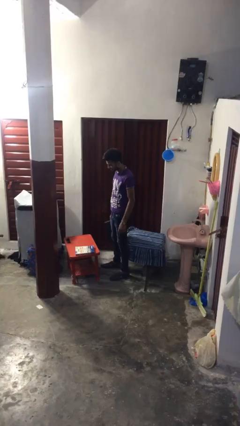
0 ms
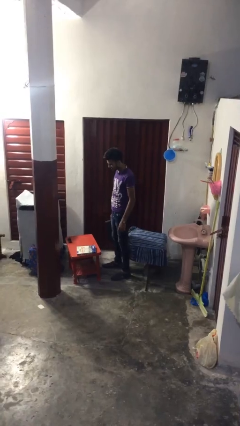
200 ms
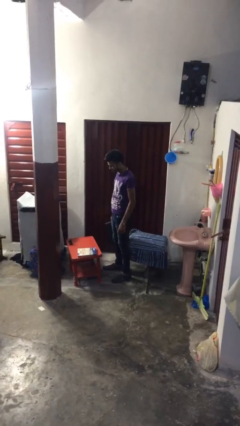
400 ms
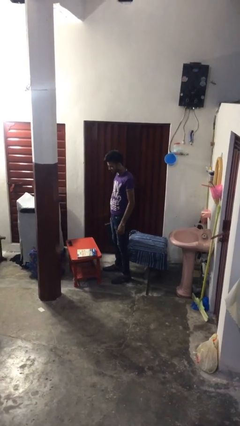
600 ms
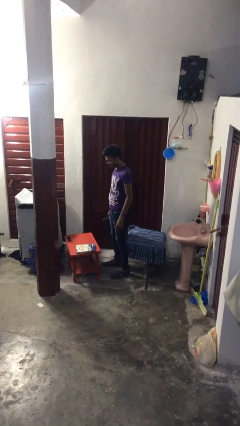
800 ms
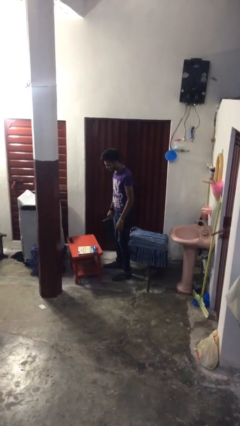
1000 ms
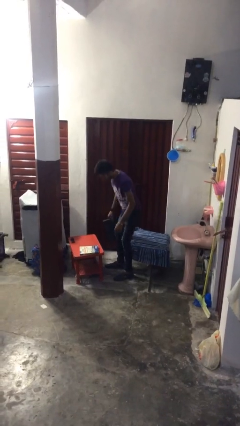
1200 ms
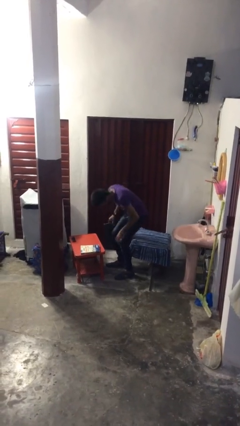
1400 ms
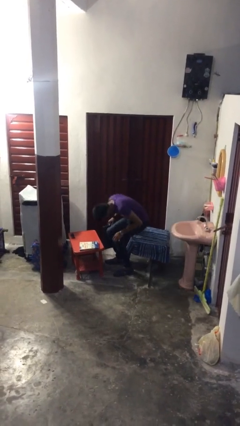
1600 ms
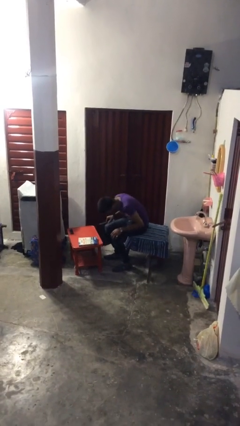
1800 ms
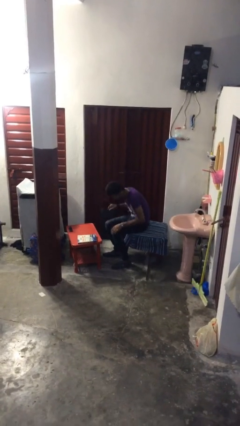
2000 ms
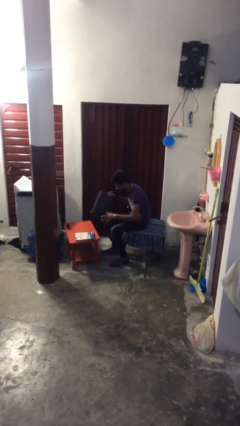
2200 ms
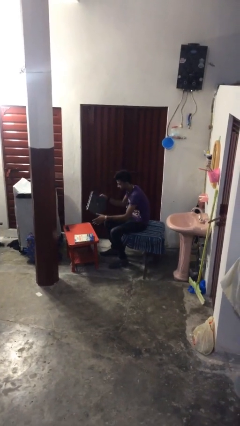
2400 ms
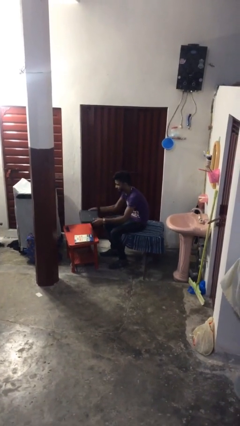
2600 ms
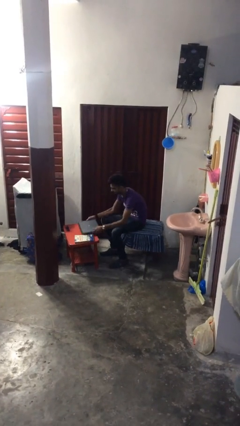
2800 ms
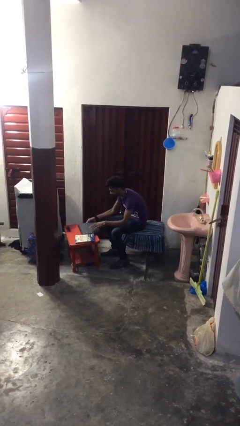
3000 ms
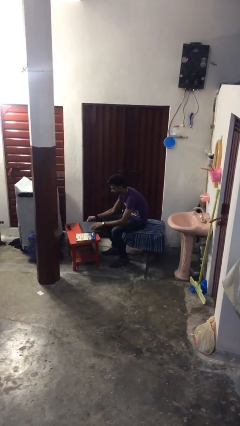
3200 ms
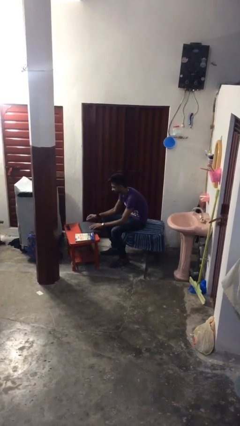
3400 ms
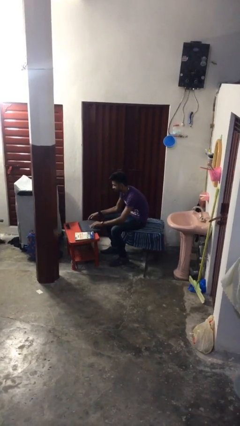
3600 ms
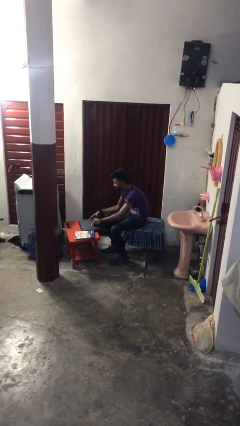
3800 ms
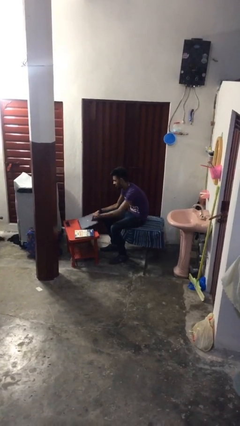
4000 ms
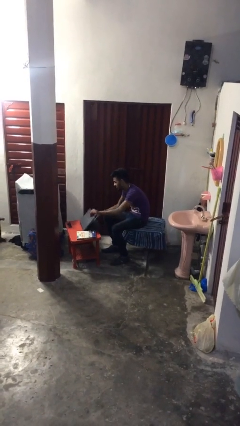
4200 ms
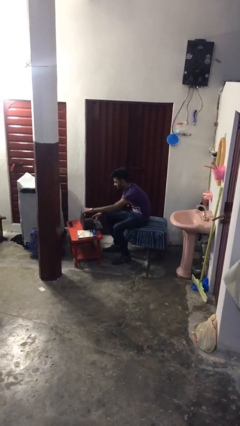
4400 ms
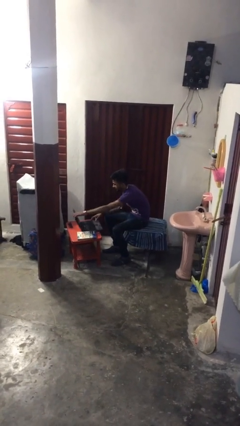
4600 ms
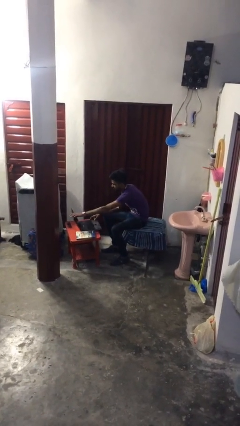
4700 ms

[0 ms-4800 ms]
person sits down

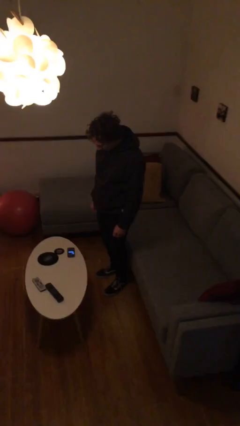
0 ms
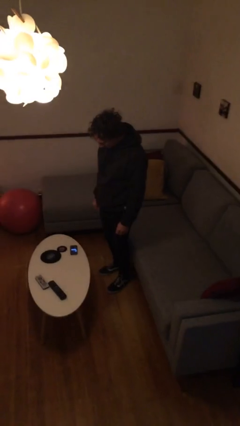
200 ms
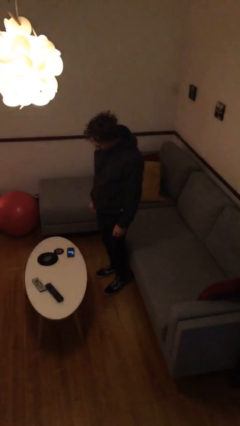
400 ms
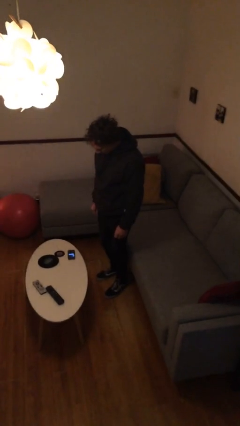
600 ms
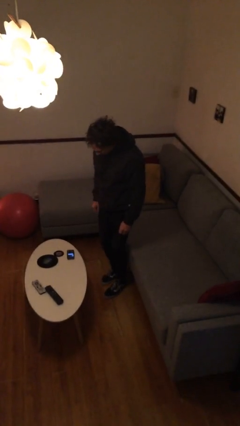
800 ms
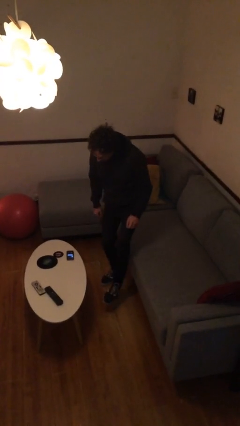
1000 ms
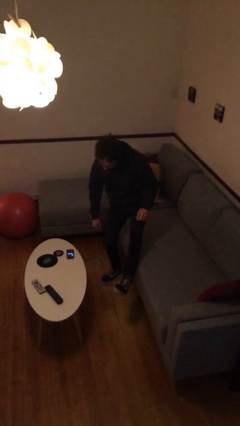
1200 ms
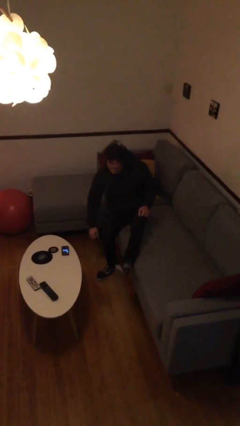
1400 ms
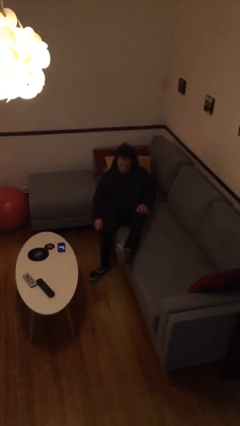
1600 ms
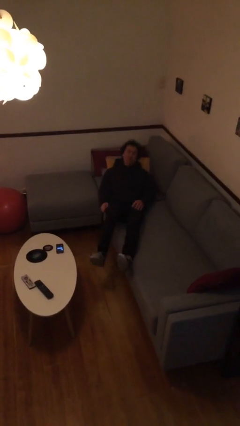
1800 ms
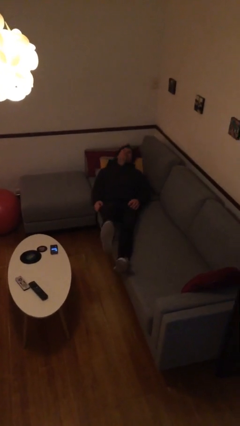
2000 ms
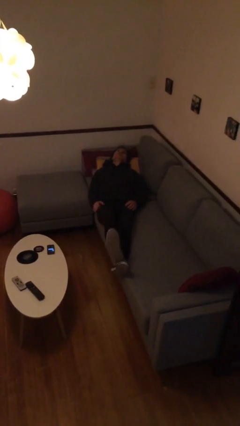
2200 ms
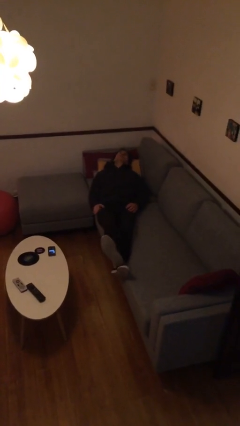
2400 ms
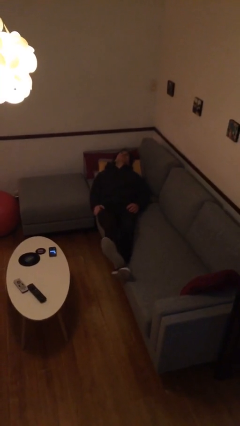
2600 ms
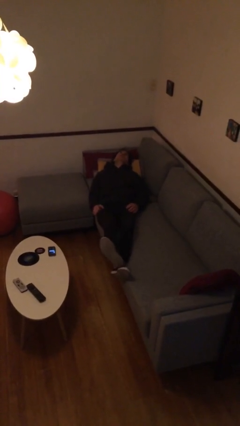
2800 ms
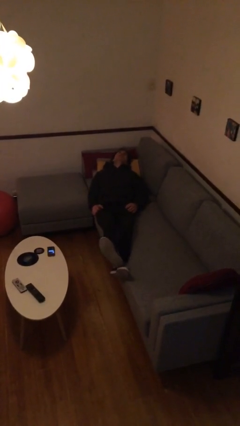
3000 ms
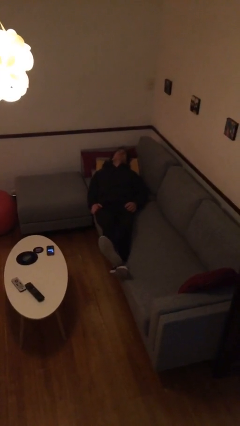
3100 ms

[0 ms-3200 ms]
person lies down on couch

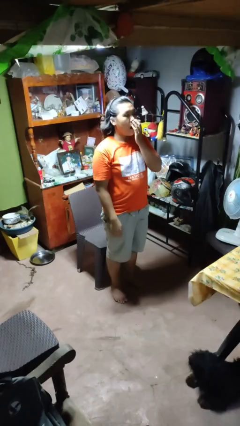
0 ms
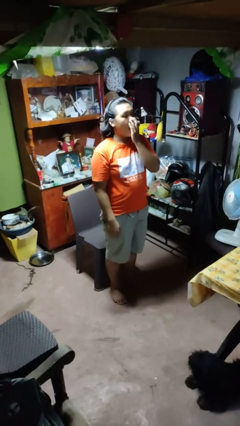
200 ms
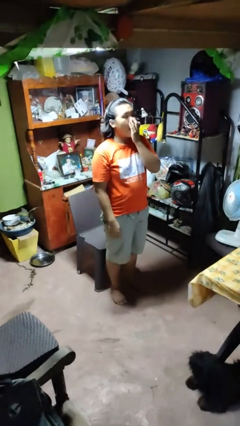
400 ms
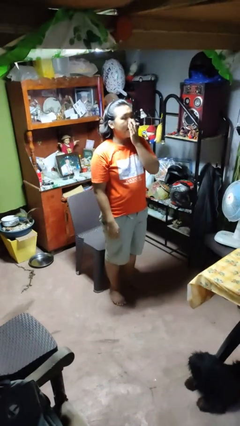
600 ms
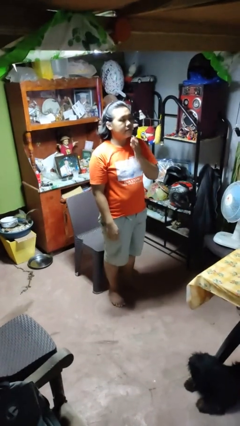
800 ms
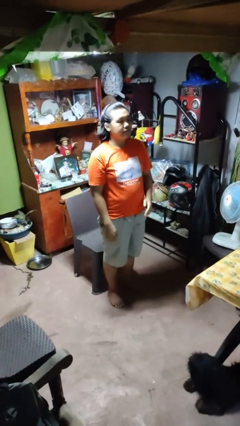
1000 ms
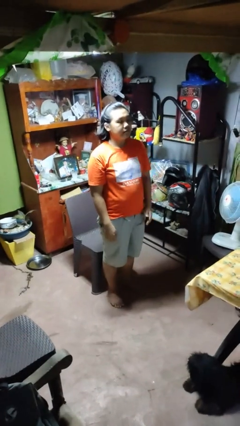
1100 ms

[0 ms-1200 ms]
person yawns

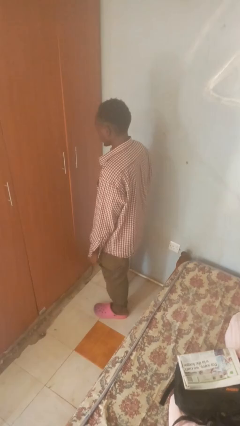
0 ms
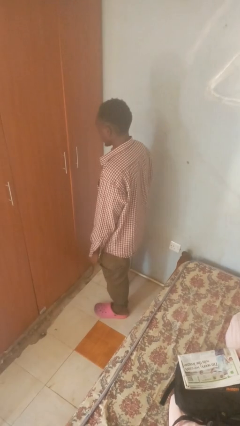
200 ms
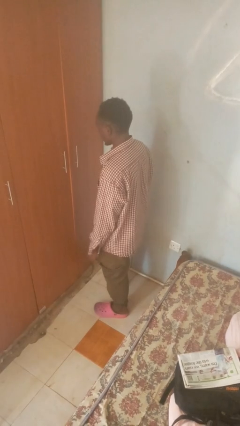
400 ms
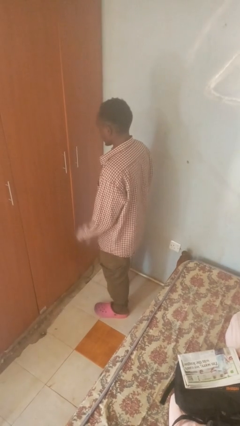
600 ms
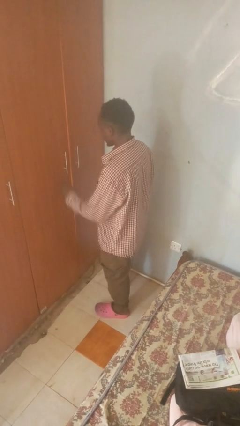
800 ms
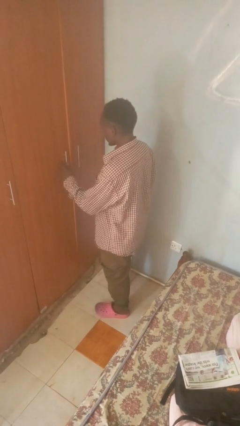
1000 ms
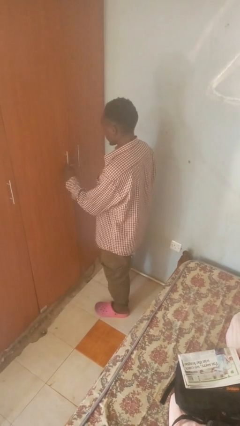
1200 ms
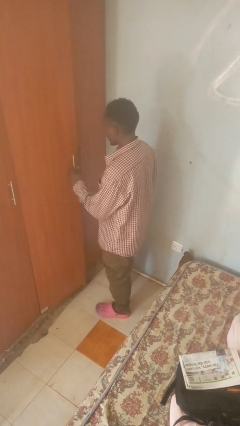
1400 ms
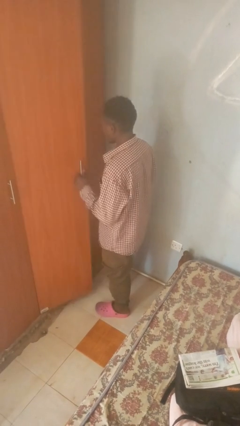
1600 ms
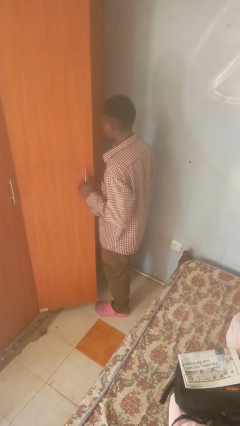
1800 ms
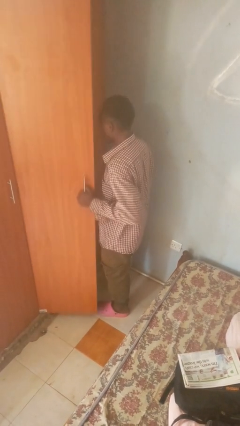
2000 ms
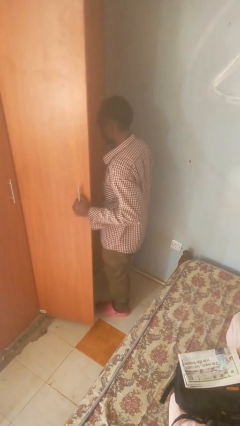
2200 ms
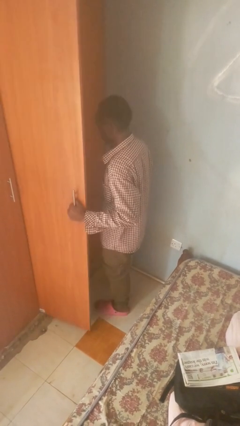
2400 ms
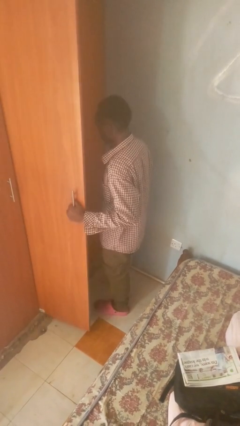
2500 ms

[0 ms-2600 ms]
person opens closet door

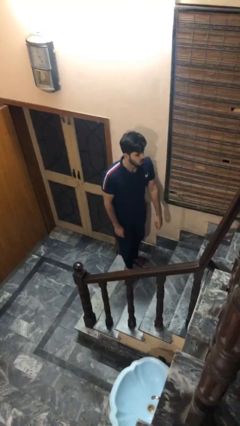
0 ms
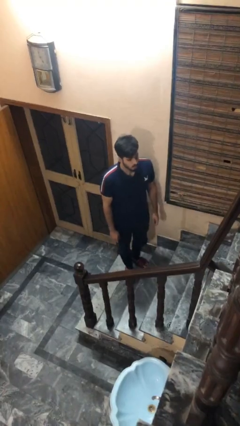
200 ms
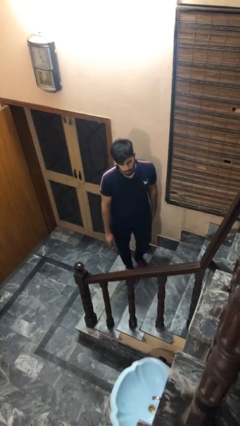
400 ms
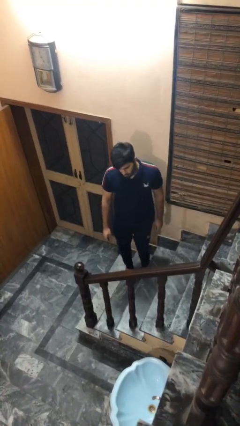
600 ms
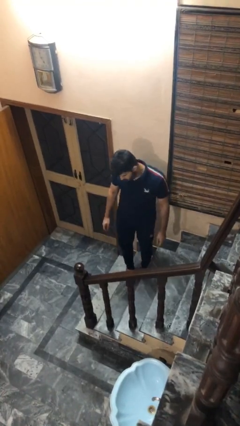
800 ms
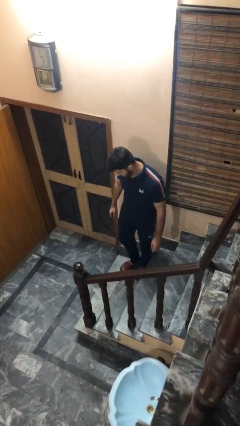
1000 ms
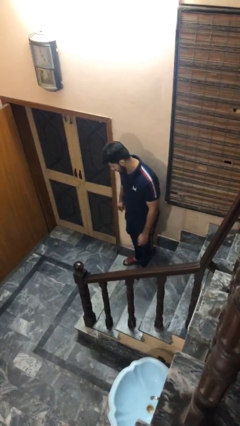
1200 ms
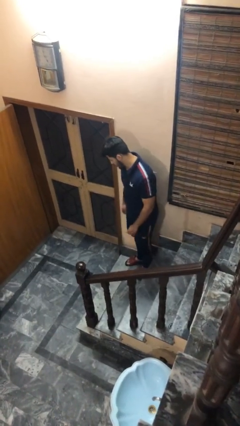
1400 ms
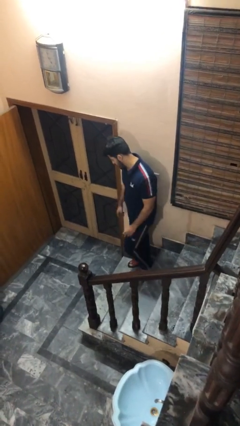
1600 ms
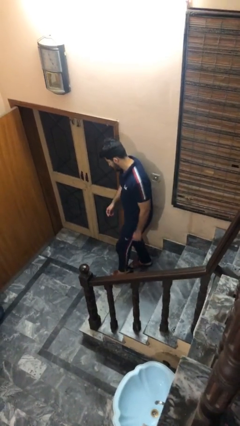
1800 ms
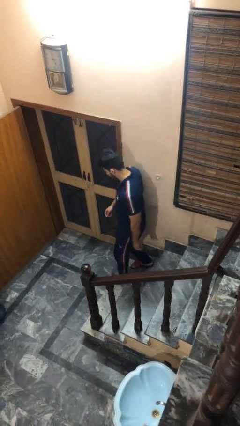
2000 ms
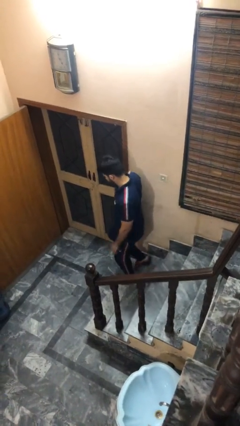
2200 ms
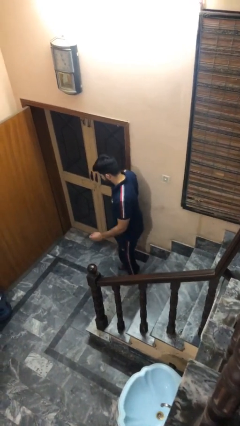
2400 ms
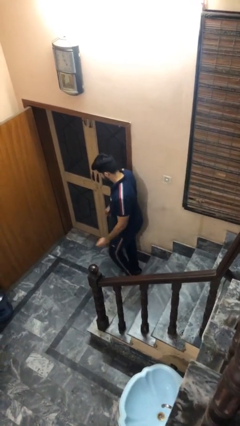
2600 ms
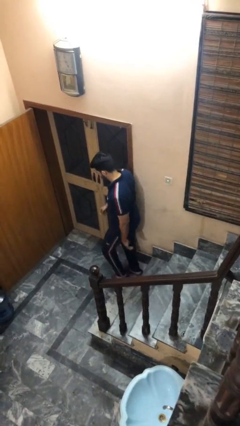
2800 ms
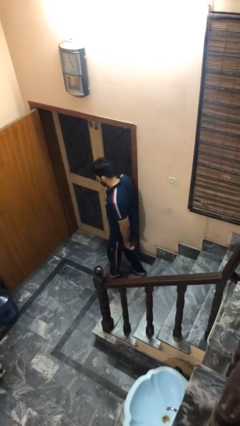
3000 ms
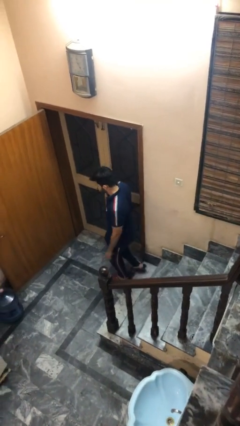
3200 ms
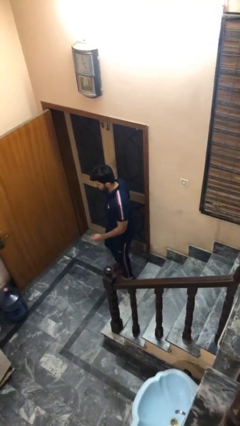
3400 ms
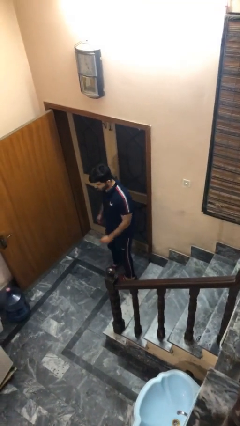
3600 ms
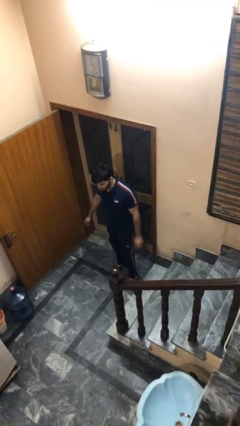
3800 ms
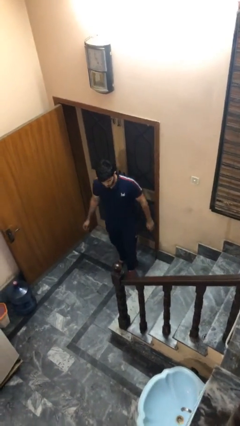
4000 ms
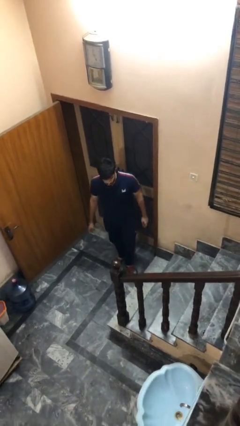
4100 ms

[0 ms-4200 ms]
person climbs down stairs

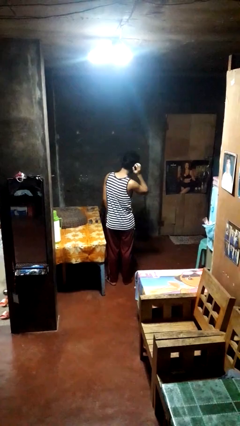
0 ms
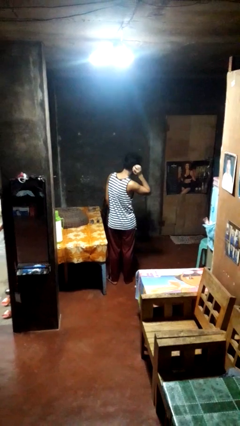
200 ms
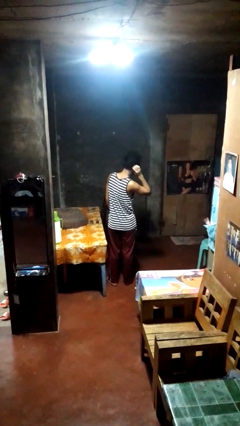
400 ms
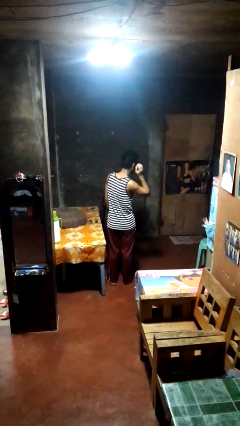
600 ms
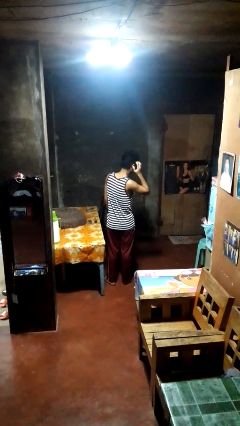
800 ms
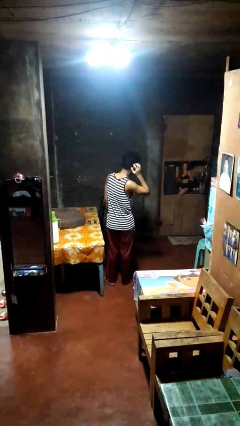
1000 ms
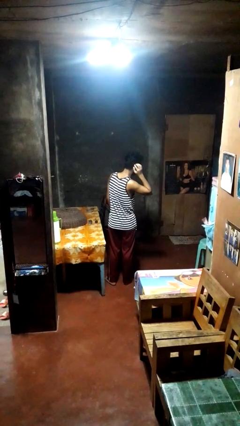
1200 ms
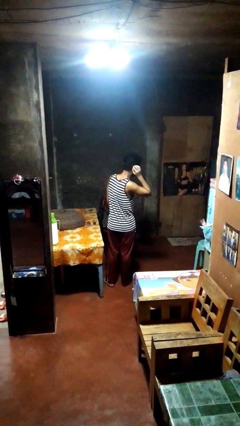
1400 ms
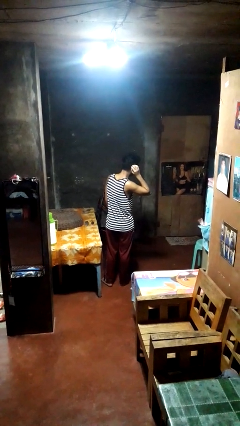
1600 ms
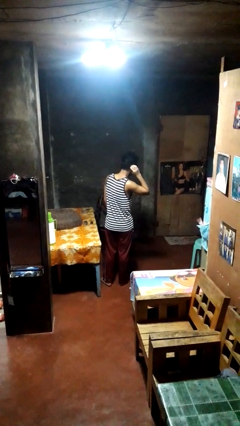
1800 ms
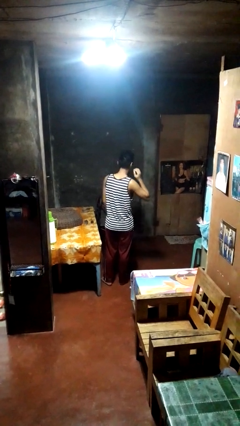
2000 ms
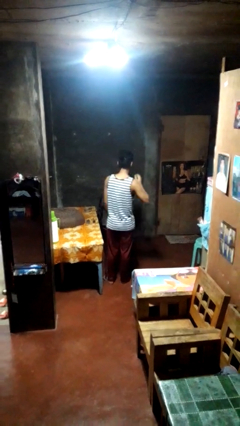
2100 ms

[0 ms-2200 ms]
person strokes hair
